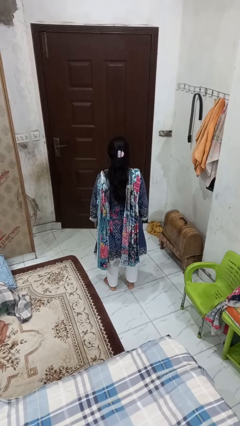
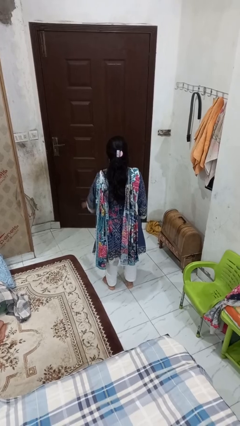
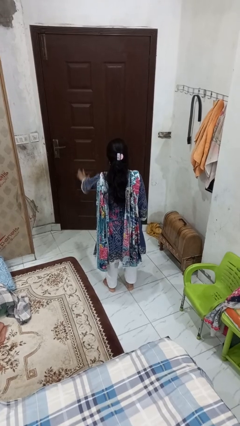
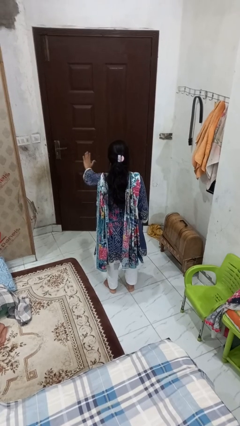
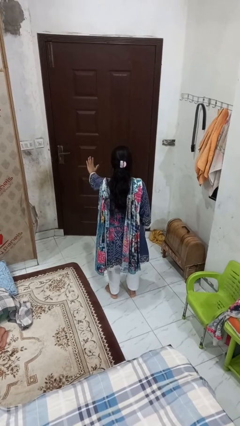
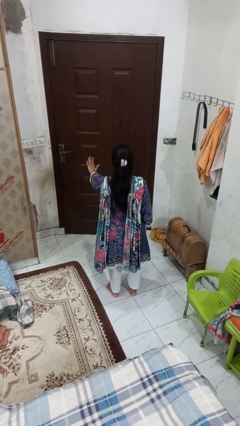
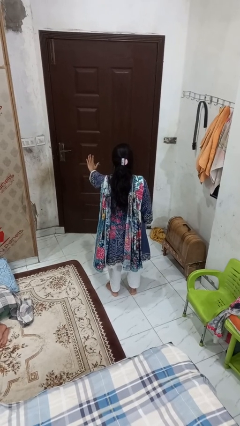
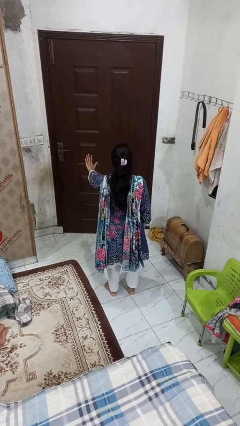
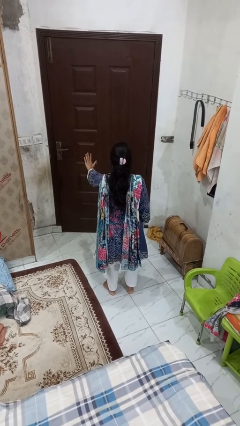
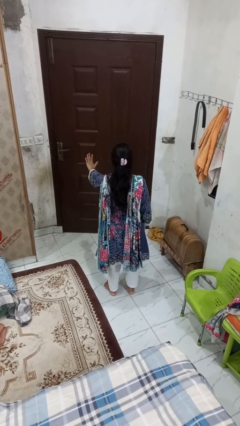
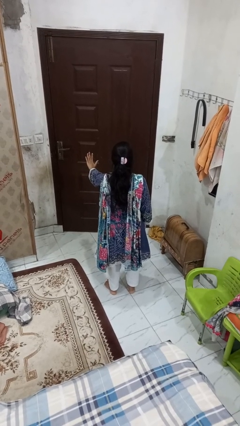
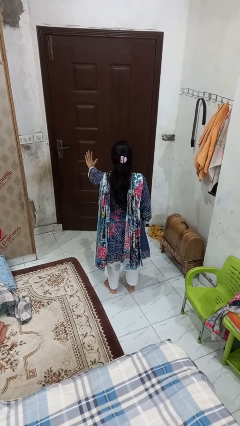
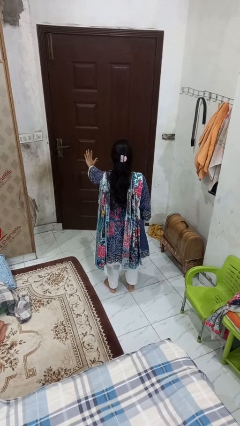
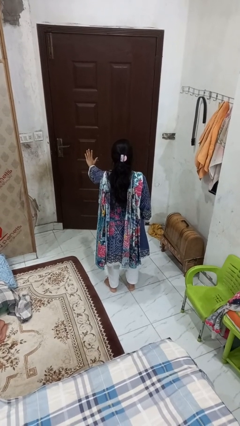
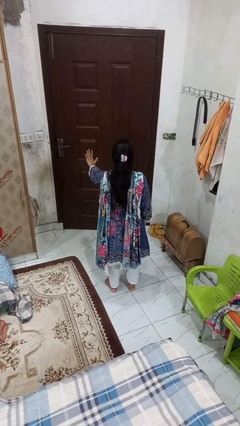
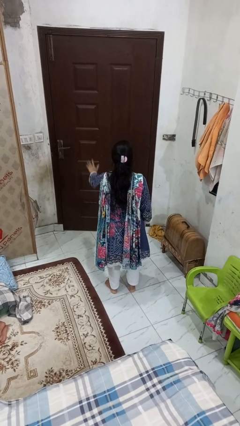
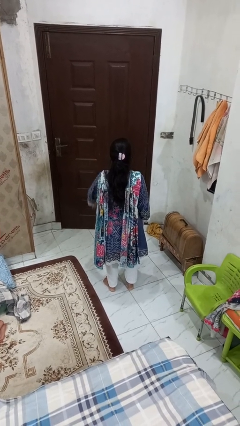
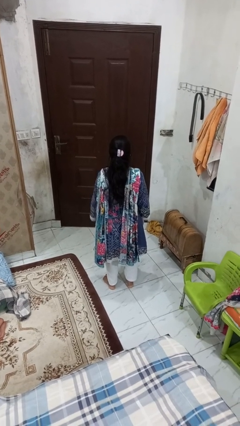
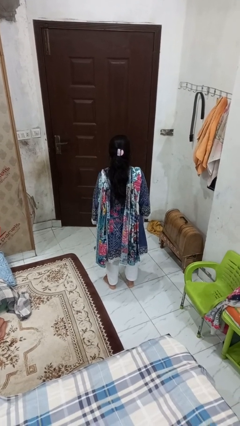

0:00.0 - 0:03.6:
person gestures stop

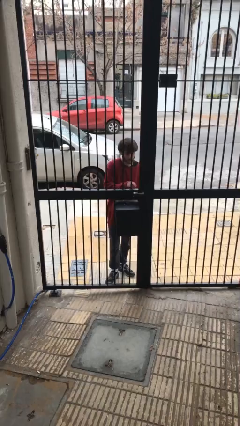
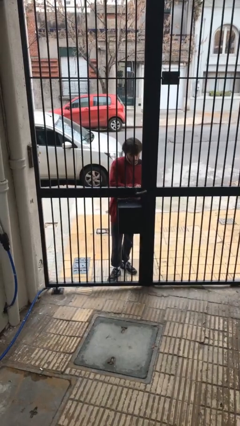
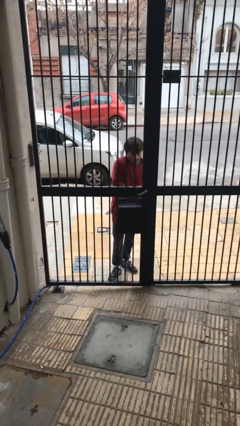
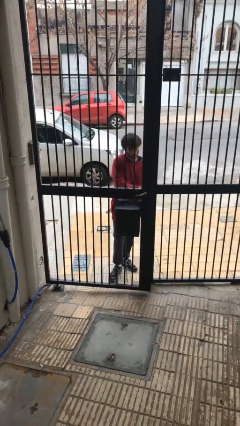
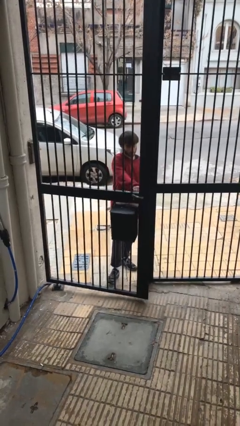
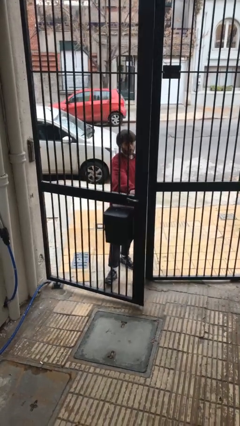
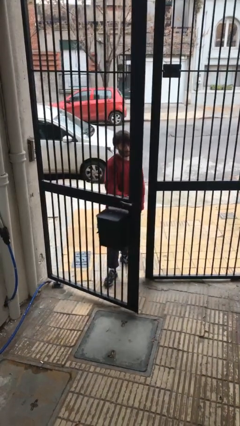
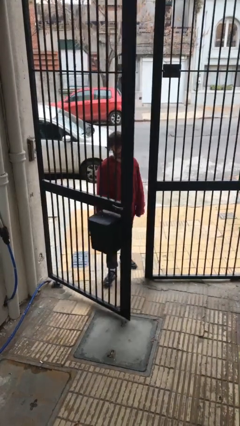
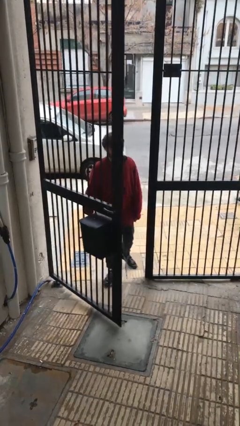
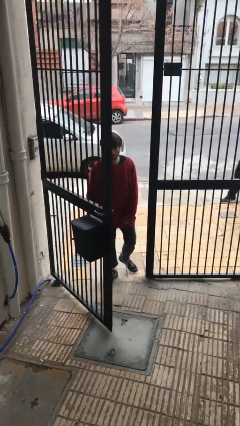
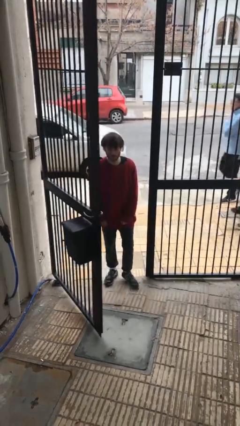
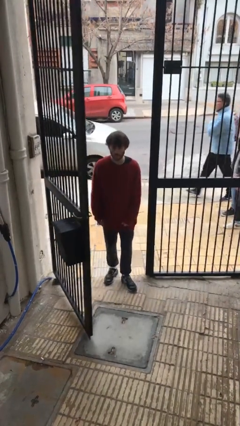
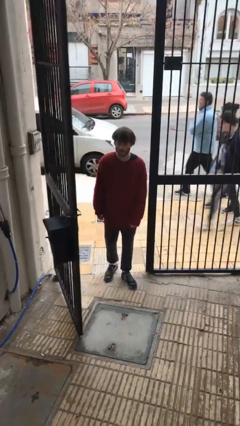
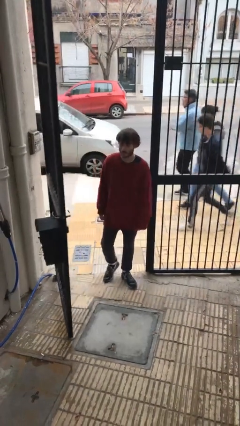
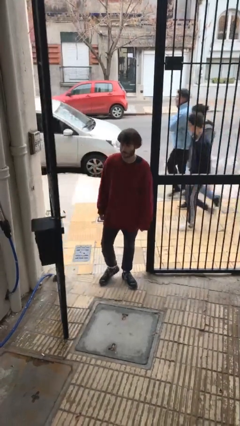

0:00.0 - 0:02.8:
person opens gate

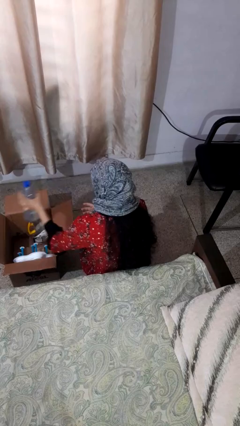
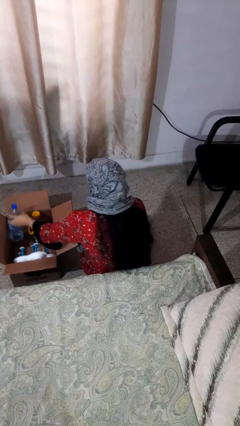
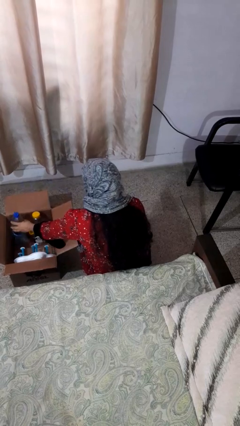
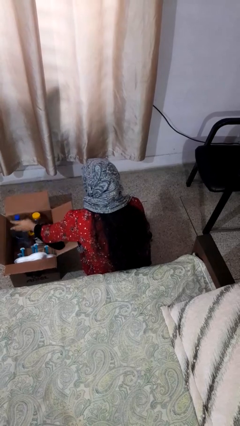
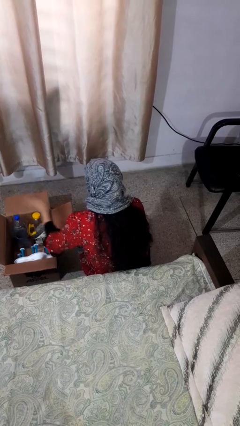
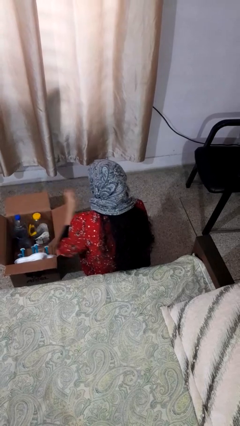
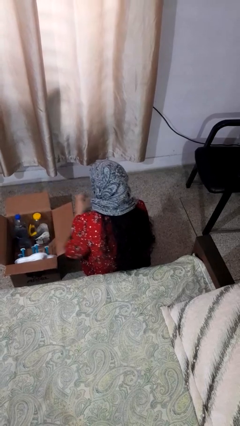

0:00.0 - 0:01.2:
person puts object into box

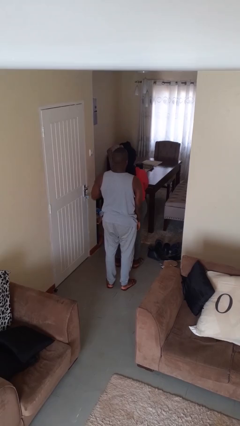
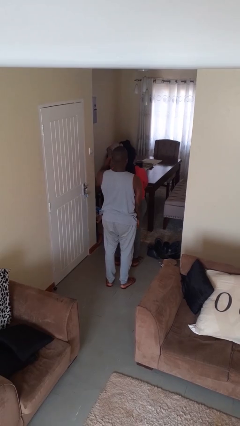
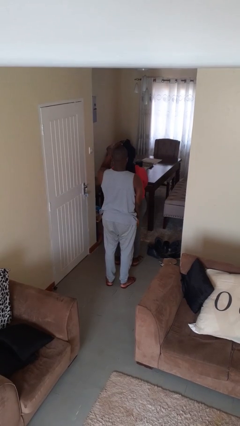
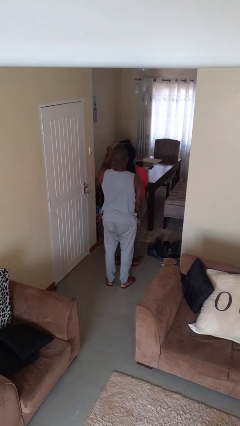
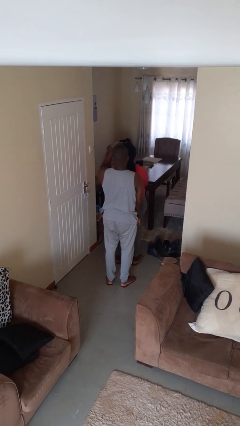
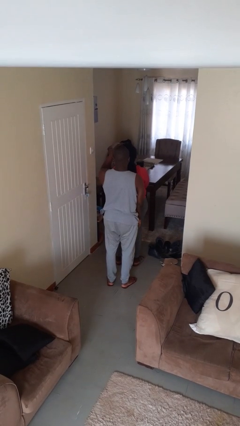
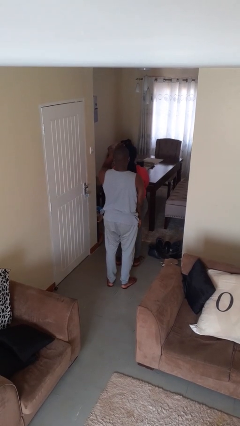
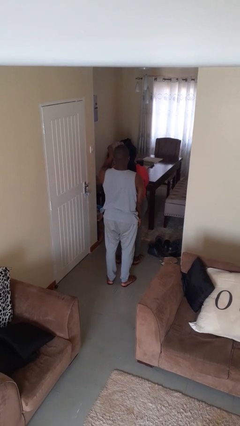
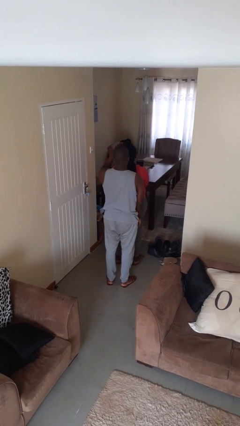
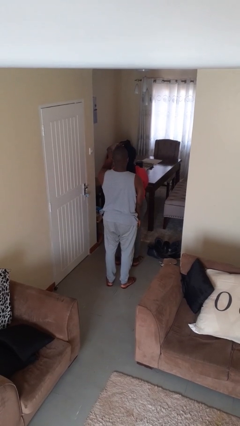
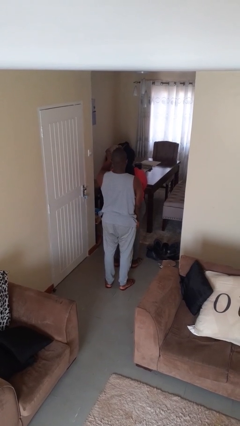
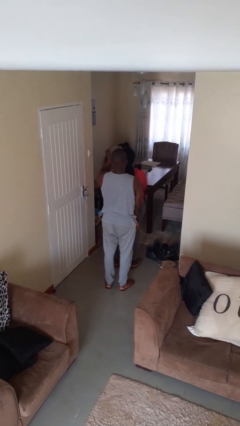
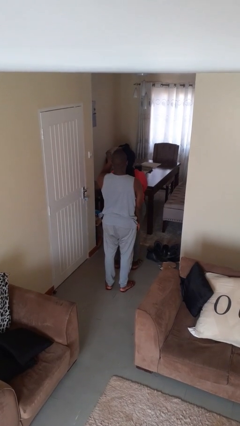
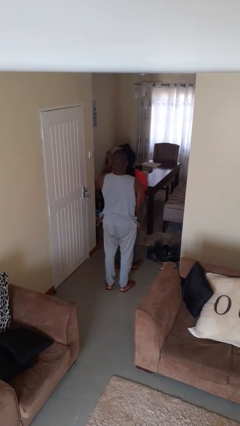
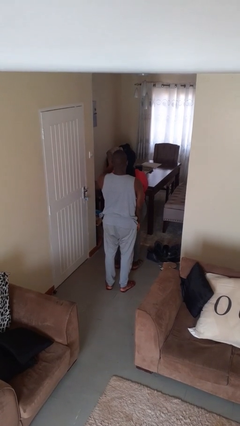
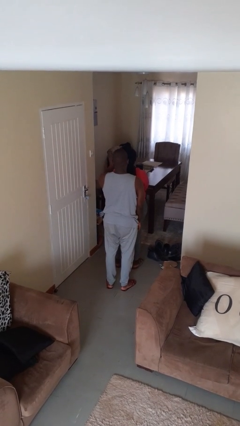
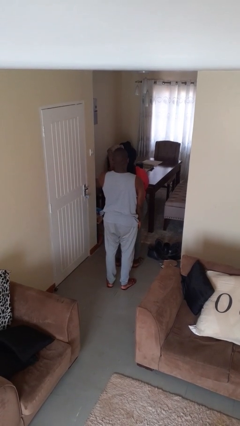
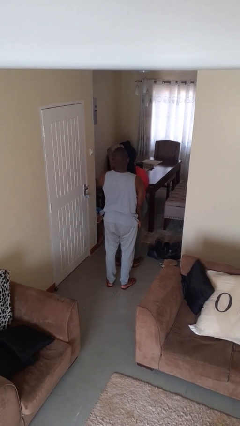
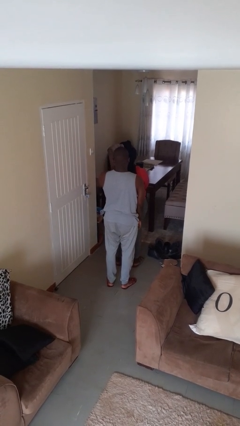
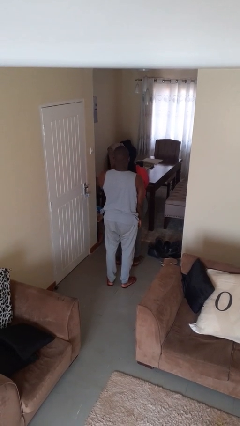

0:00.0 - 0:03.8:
person brushes hair of person

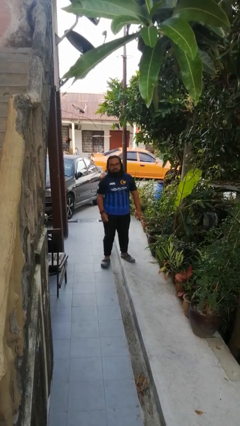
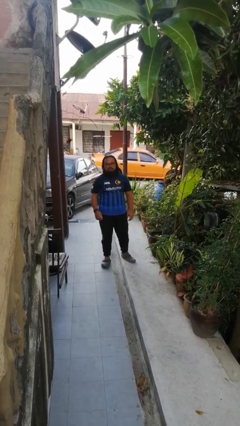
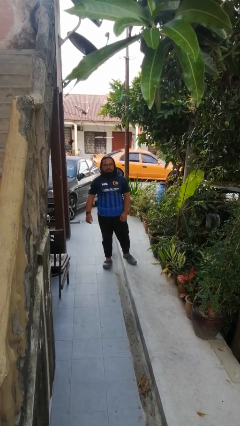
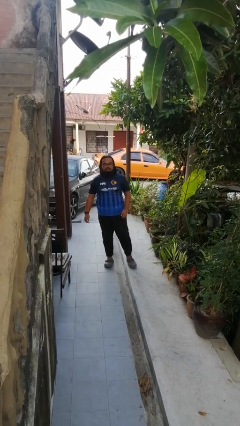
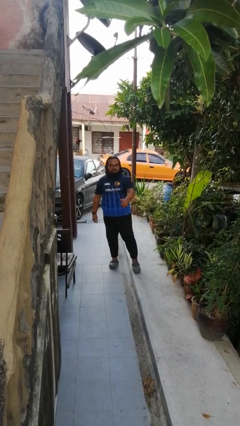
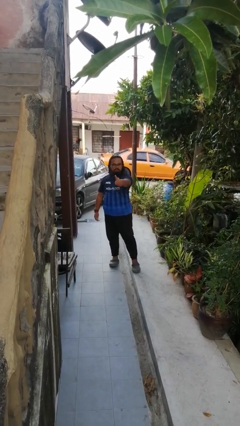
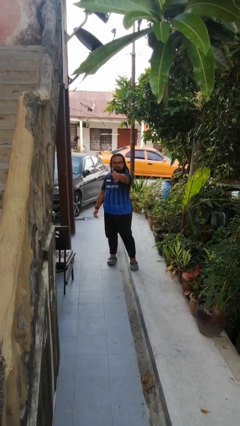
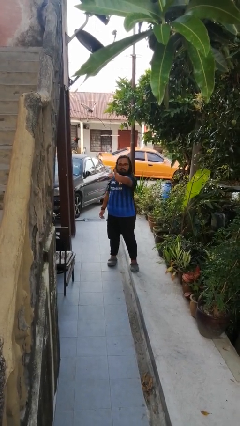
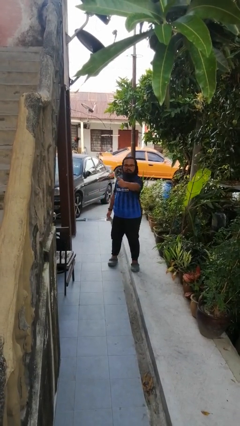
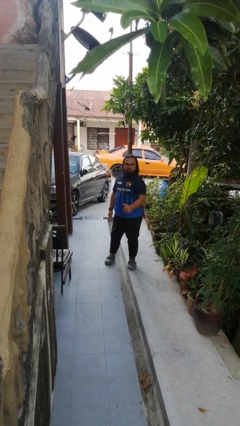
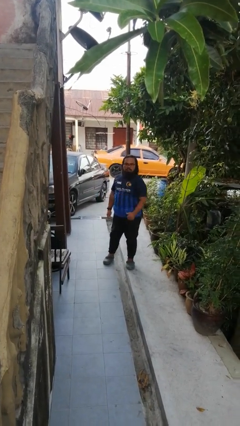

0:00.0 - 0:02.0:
person gestures thumbs up

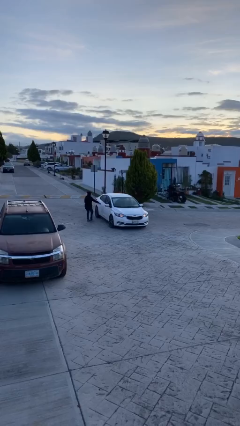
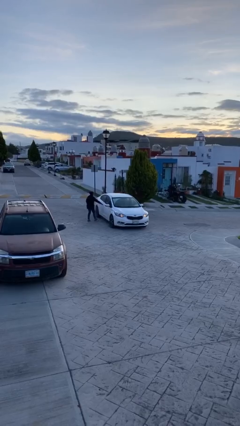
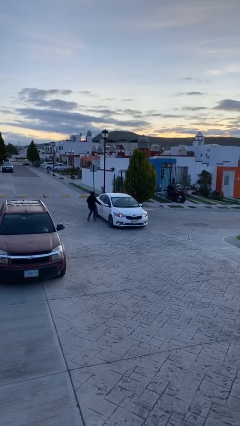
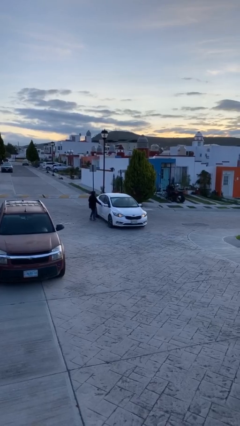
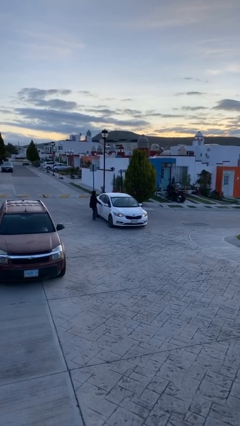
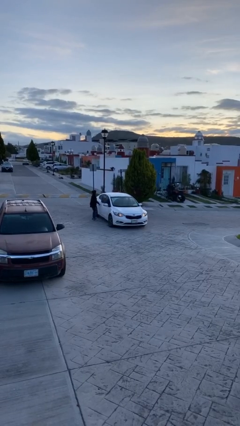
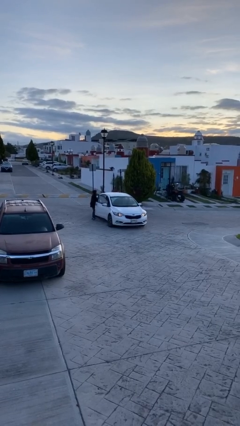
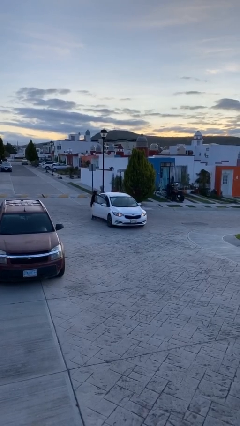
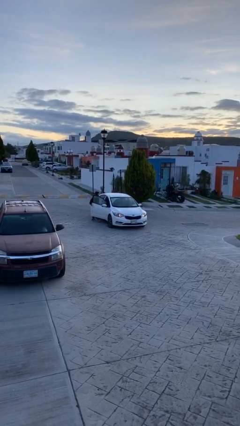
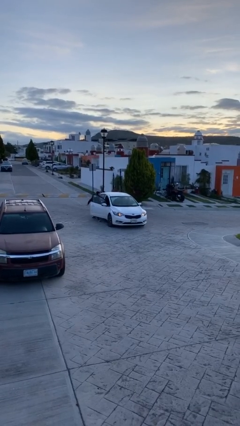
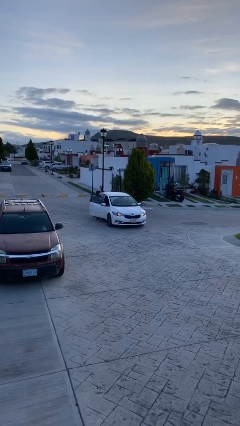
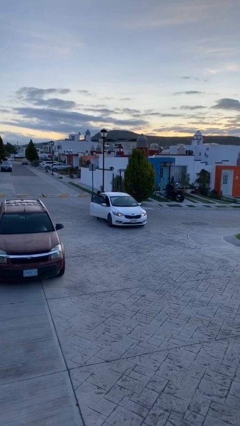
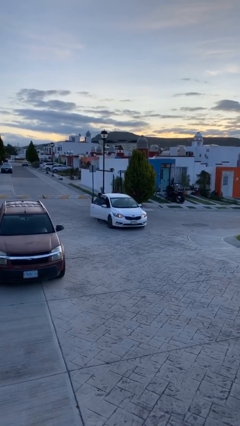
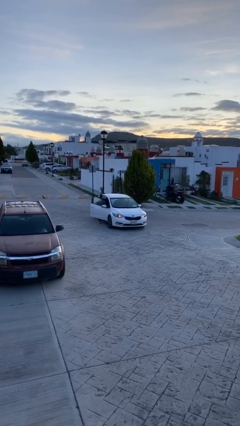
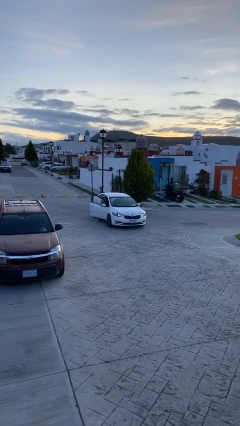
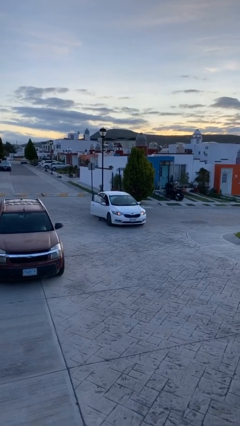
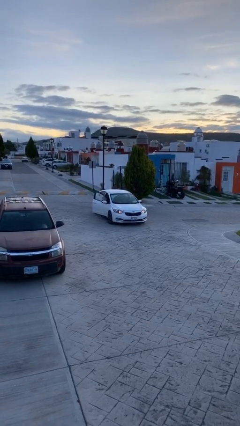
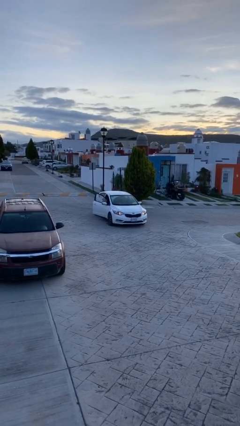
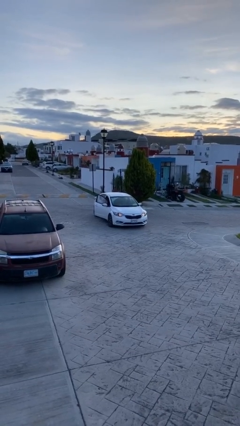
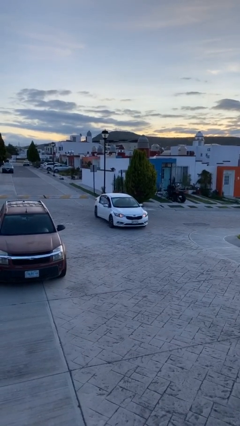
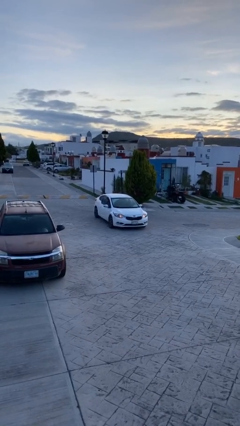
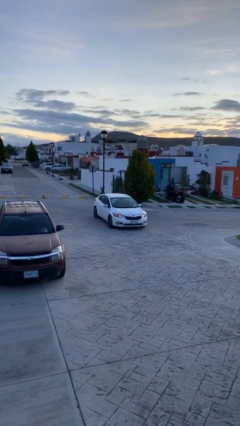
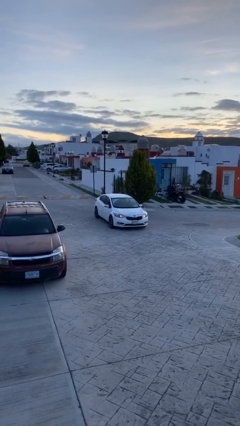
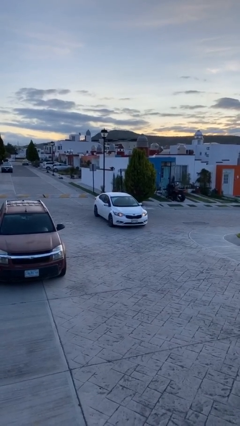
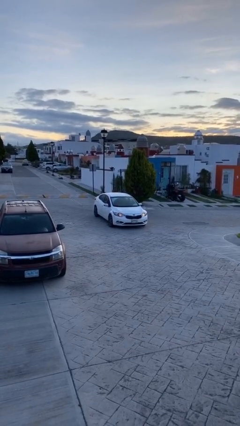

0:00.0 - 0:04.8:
car picks up person
